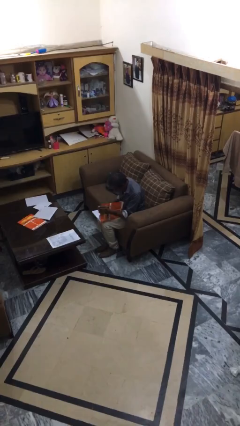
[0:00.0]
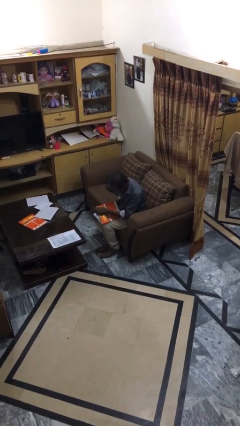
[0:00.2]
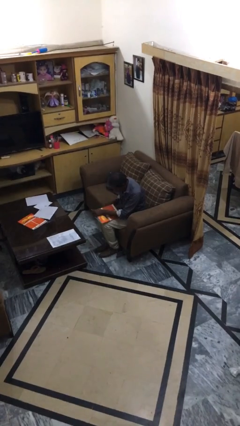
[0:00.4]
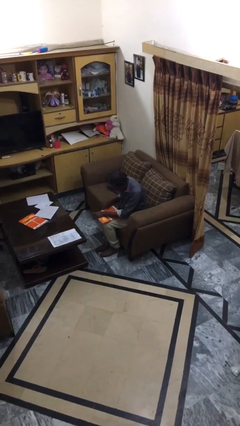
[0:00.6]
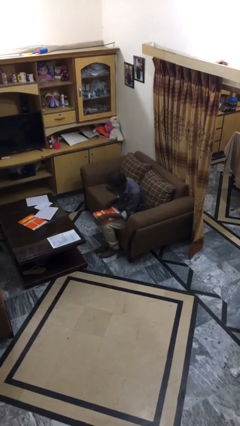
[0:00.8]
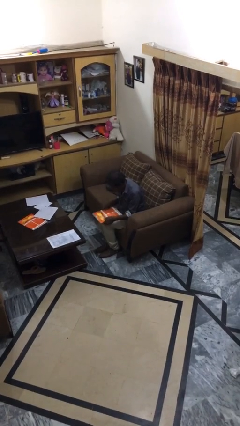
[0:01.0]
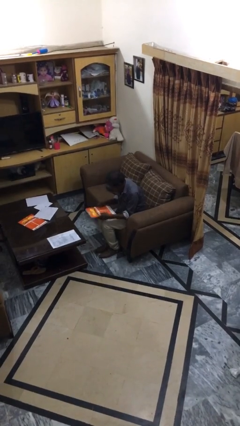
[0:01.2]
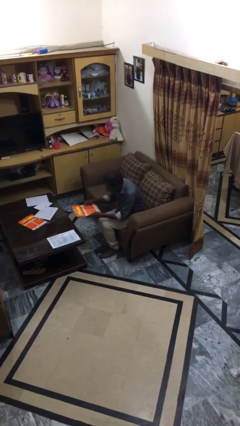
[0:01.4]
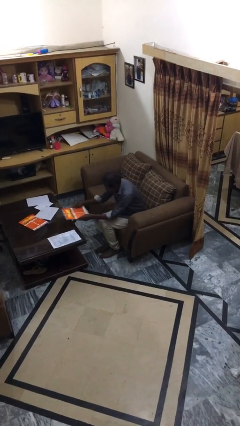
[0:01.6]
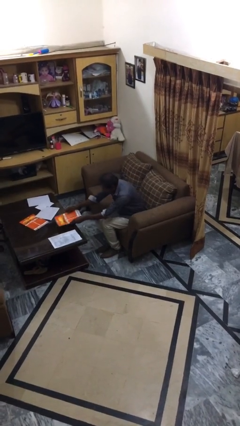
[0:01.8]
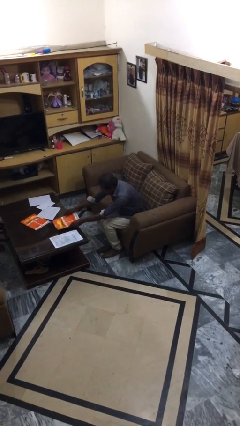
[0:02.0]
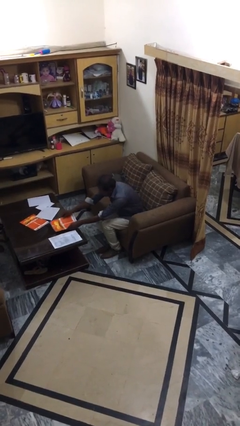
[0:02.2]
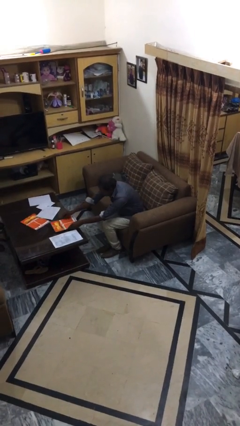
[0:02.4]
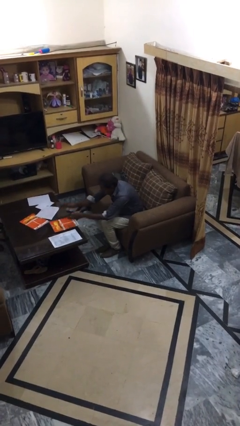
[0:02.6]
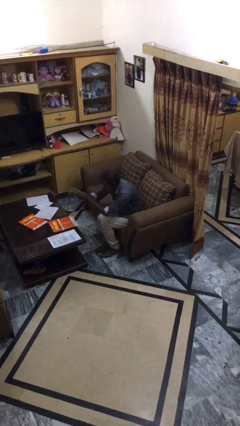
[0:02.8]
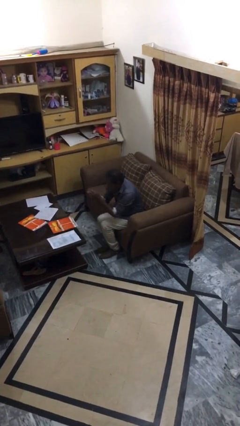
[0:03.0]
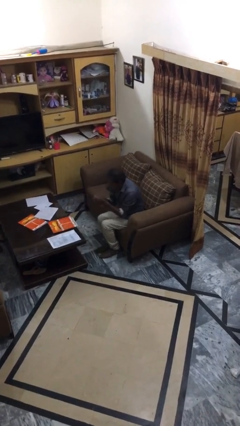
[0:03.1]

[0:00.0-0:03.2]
person puts down object on table

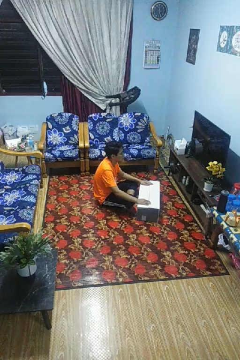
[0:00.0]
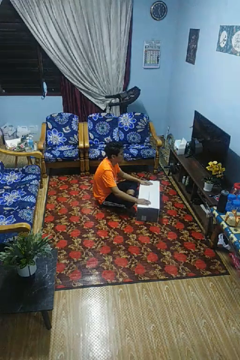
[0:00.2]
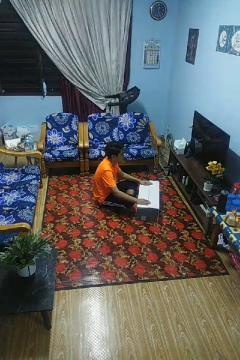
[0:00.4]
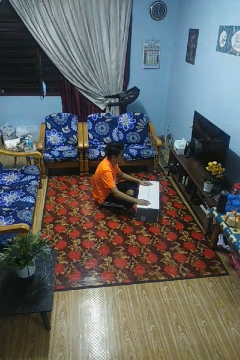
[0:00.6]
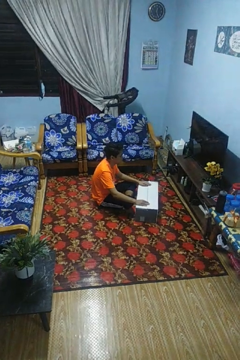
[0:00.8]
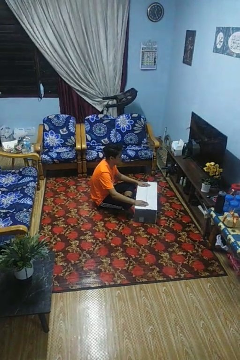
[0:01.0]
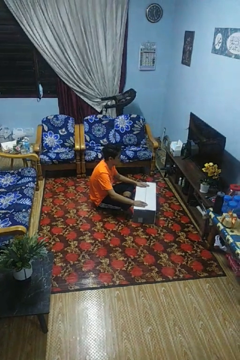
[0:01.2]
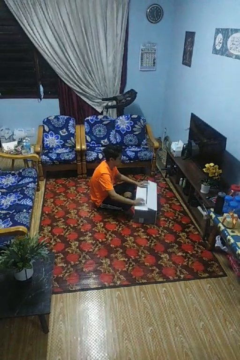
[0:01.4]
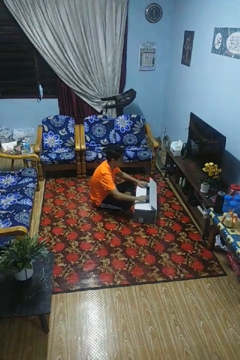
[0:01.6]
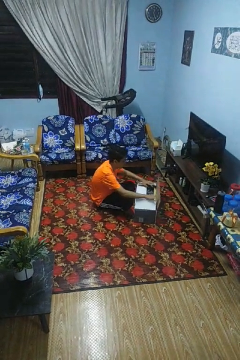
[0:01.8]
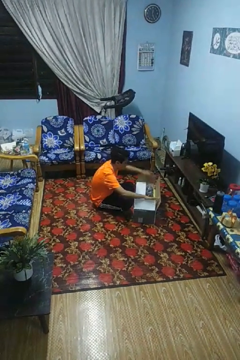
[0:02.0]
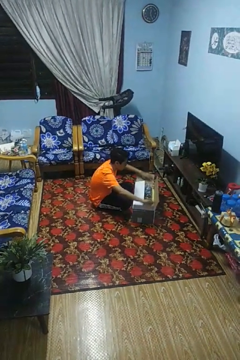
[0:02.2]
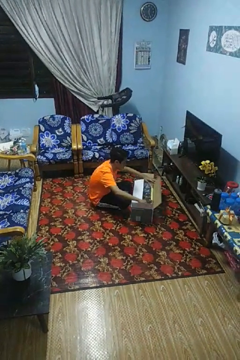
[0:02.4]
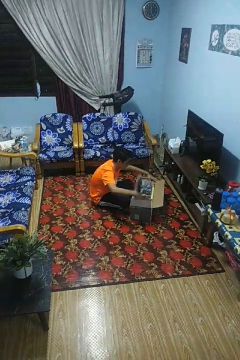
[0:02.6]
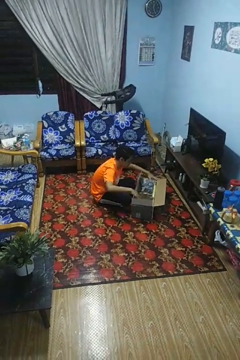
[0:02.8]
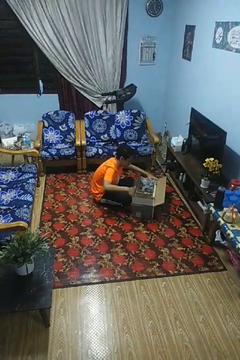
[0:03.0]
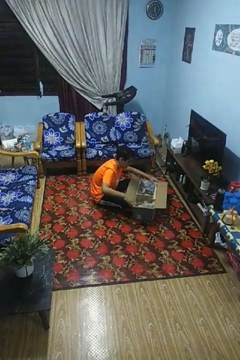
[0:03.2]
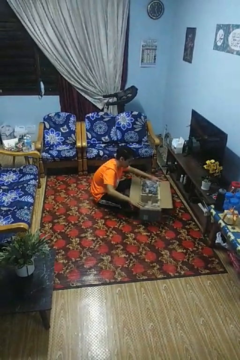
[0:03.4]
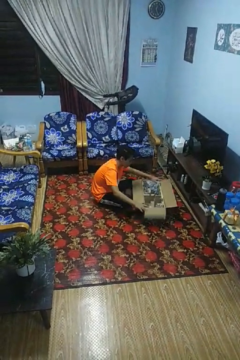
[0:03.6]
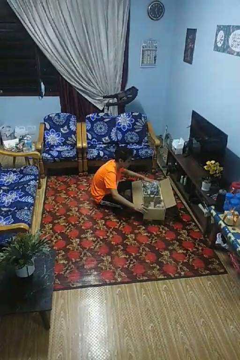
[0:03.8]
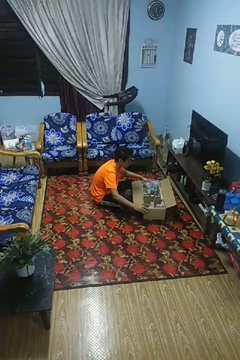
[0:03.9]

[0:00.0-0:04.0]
person opens box

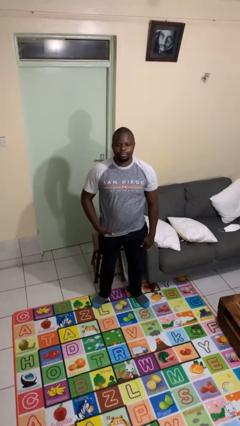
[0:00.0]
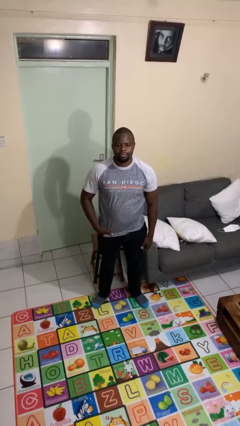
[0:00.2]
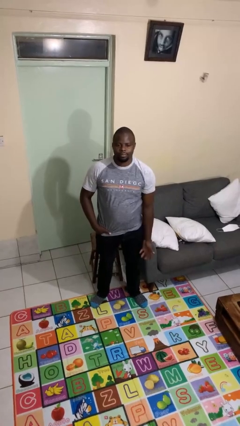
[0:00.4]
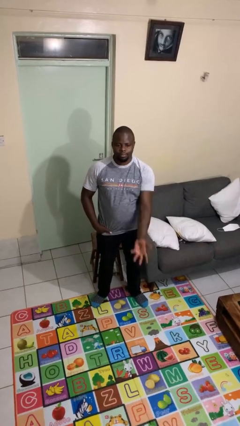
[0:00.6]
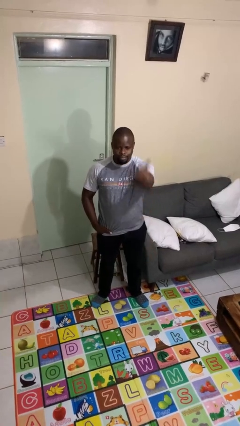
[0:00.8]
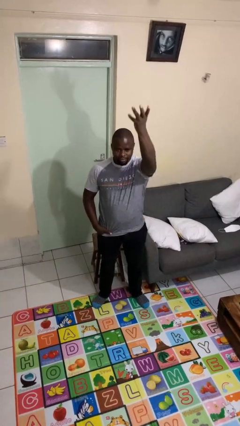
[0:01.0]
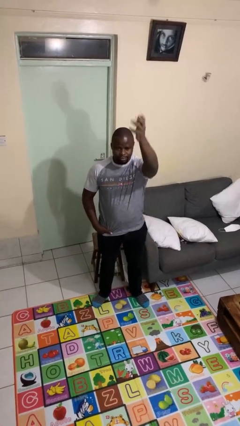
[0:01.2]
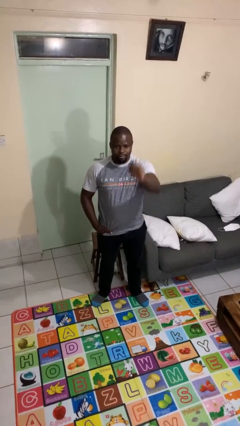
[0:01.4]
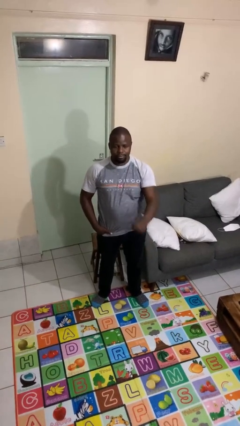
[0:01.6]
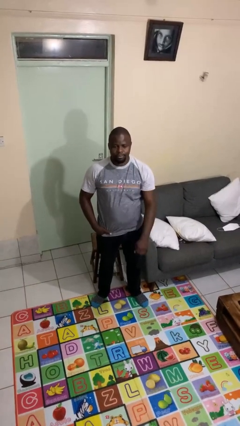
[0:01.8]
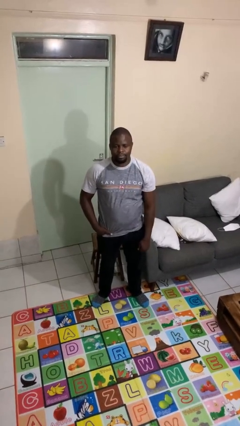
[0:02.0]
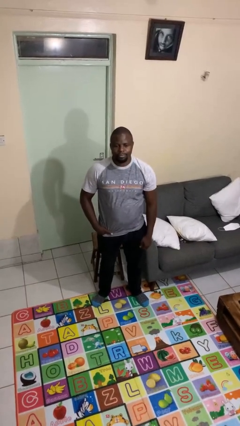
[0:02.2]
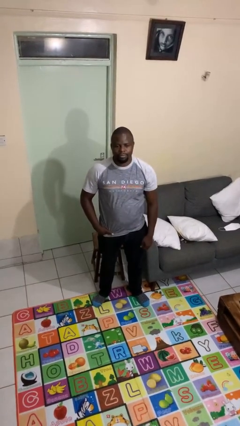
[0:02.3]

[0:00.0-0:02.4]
person gestures swipe up

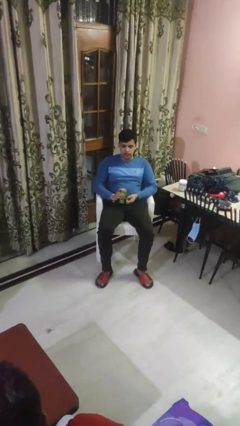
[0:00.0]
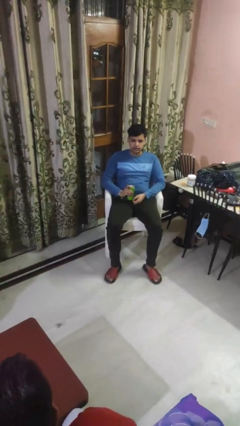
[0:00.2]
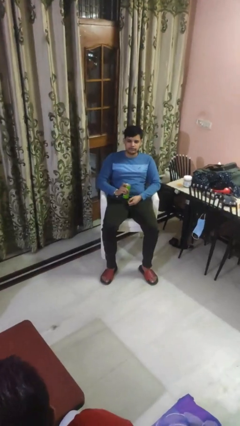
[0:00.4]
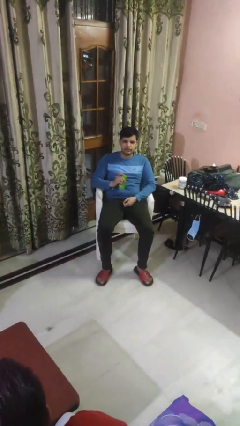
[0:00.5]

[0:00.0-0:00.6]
person opens beverage can

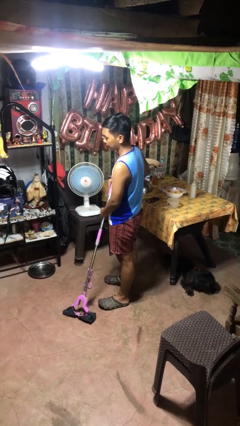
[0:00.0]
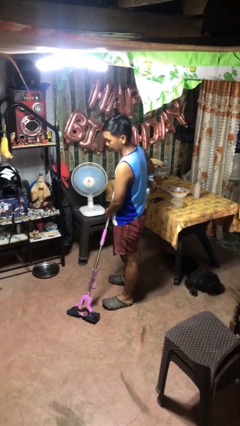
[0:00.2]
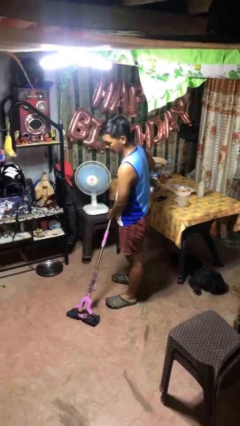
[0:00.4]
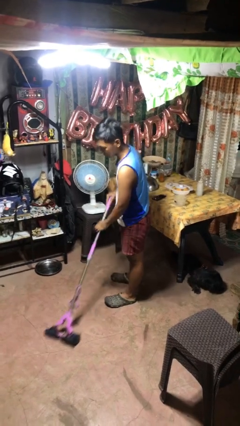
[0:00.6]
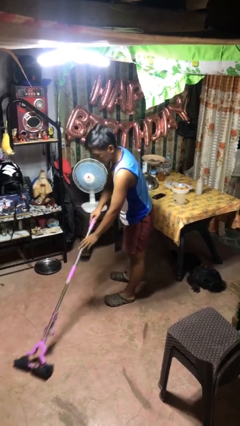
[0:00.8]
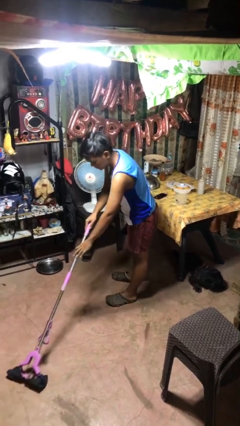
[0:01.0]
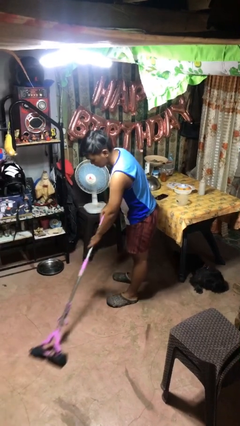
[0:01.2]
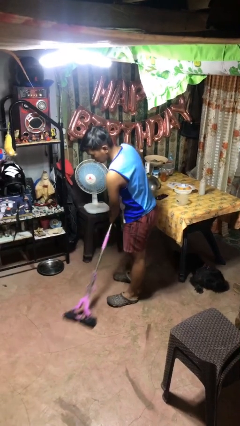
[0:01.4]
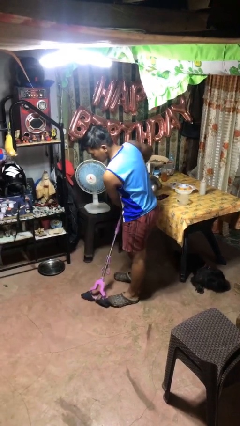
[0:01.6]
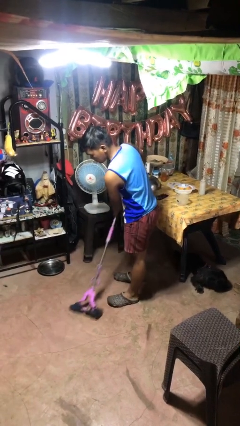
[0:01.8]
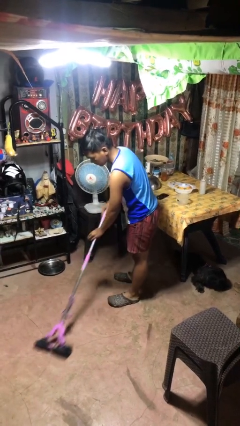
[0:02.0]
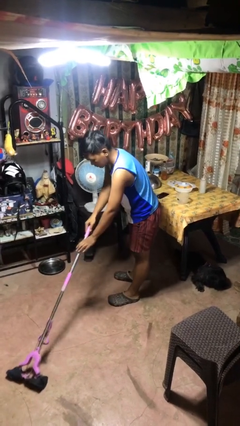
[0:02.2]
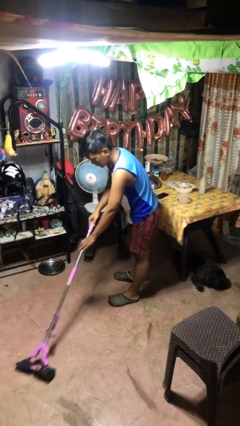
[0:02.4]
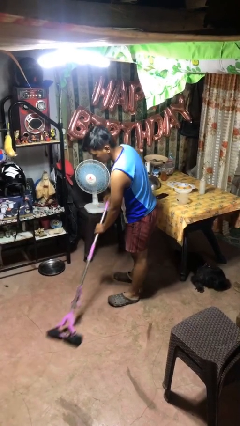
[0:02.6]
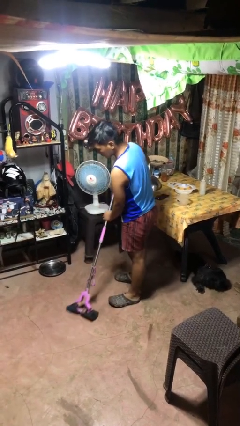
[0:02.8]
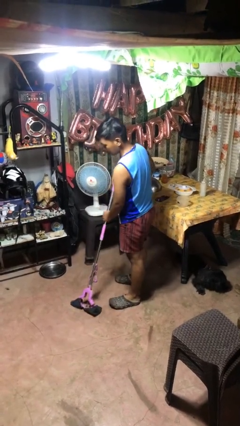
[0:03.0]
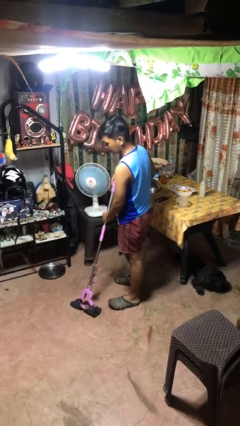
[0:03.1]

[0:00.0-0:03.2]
person mops

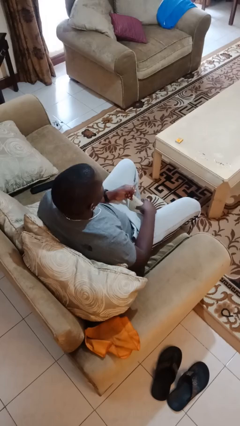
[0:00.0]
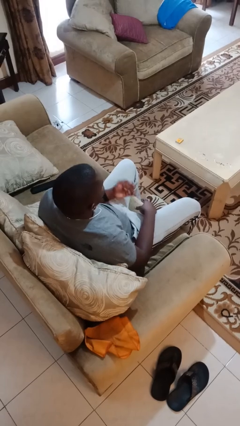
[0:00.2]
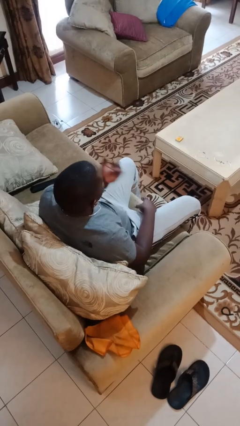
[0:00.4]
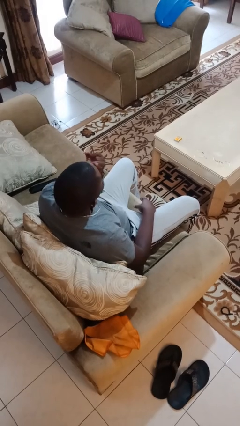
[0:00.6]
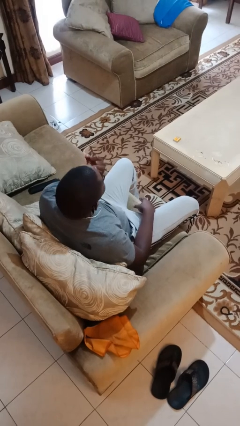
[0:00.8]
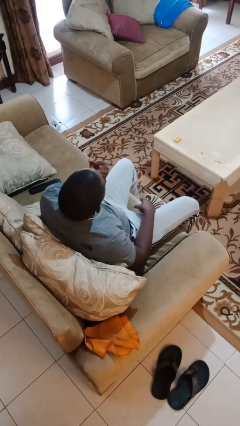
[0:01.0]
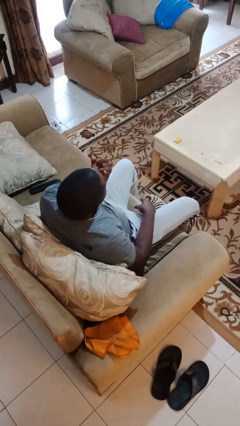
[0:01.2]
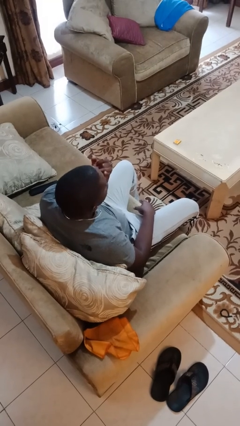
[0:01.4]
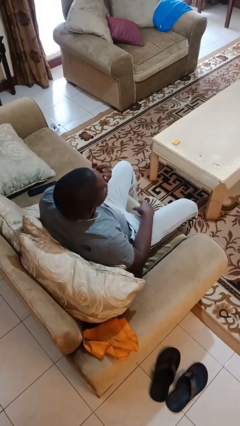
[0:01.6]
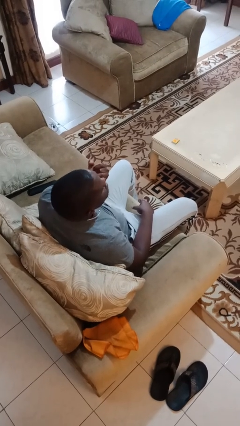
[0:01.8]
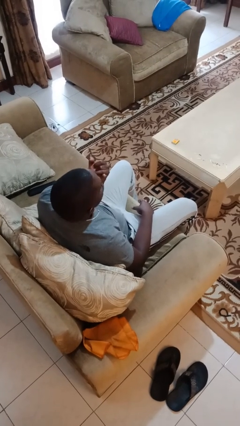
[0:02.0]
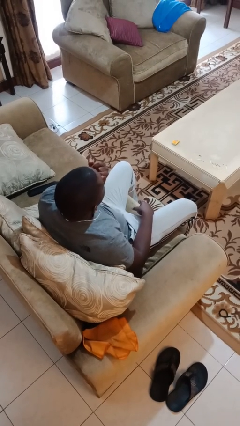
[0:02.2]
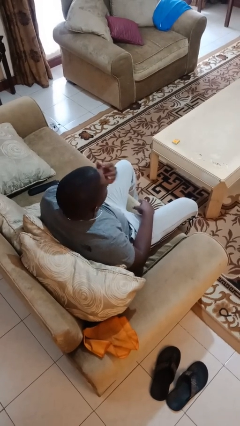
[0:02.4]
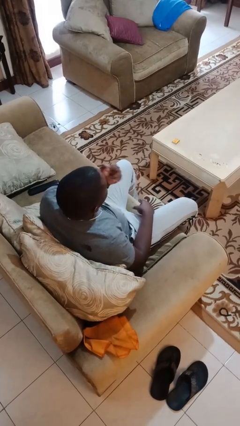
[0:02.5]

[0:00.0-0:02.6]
person licks fingers

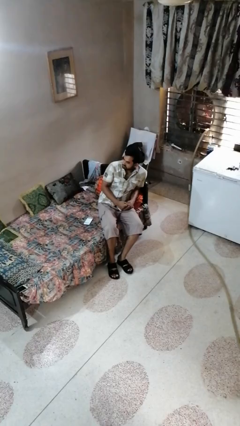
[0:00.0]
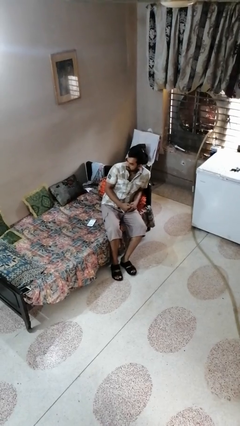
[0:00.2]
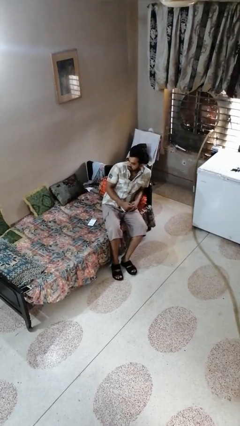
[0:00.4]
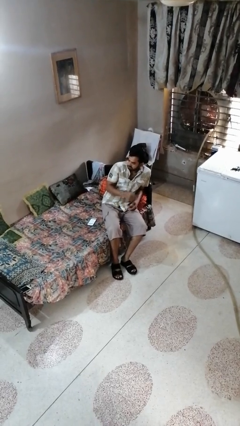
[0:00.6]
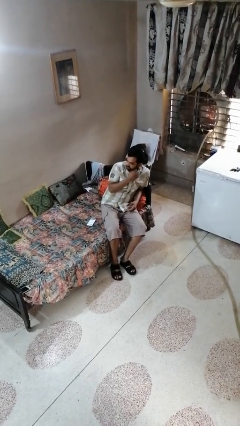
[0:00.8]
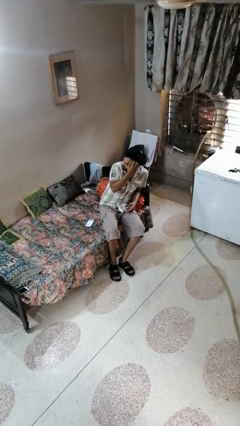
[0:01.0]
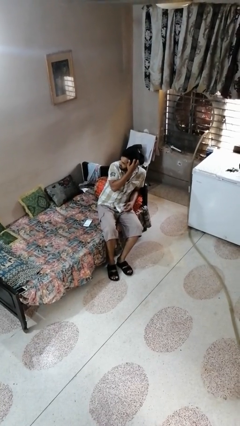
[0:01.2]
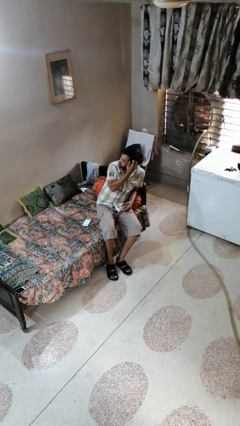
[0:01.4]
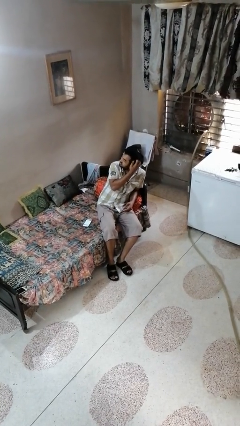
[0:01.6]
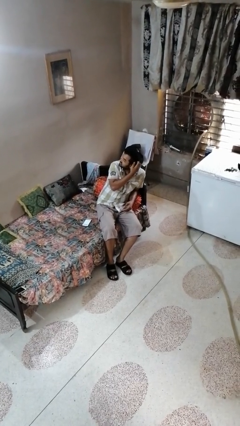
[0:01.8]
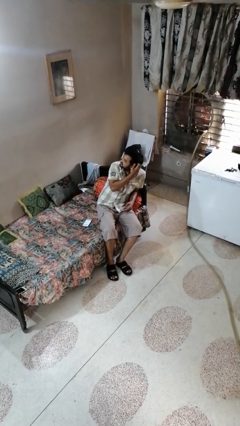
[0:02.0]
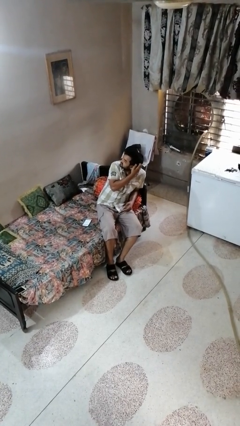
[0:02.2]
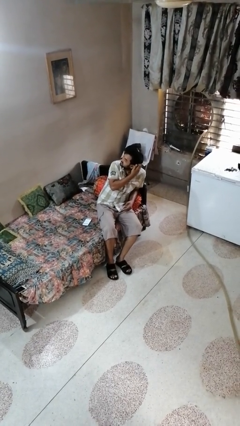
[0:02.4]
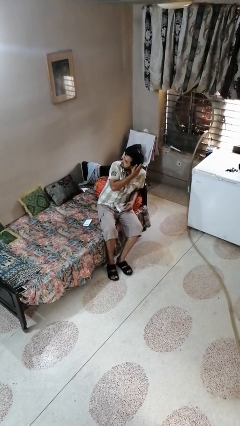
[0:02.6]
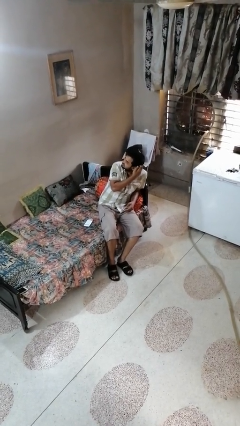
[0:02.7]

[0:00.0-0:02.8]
person scratches face
